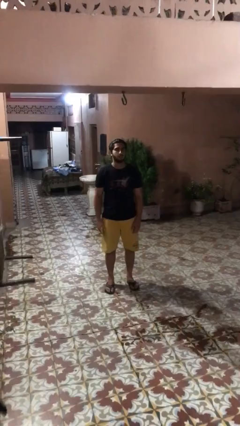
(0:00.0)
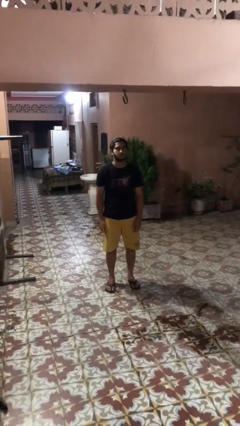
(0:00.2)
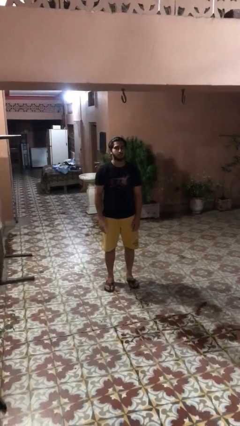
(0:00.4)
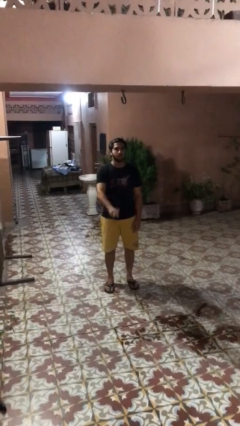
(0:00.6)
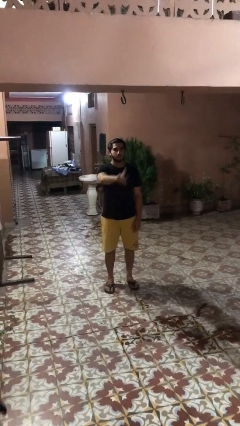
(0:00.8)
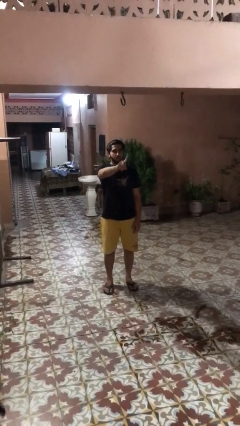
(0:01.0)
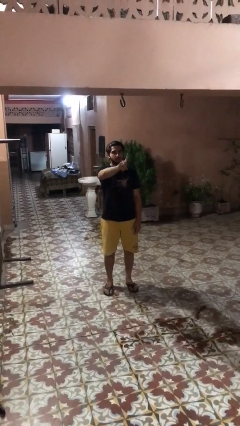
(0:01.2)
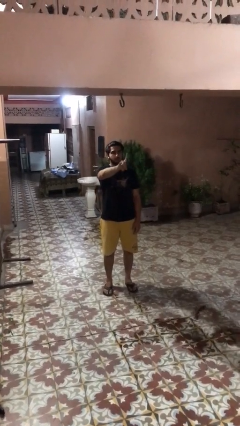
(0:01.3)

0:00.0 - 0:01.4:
person gestures number one

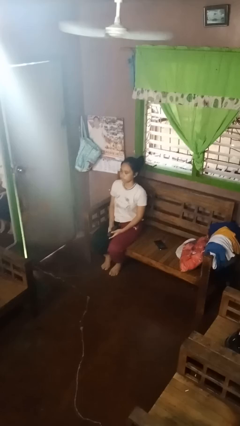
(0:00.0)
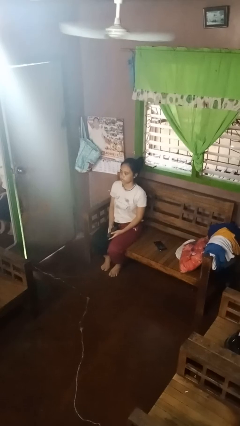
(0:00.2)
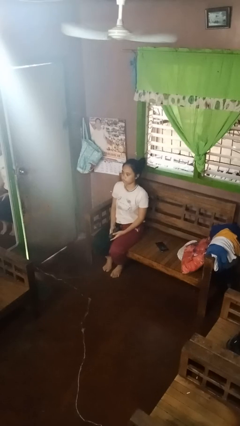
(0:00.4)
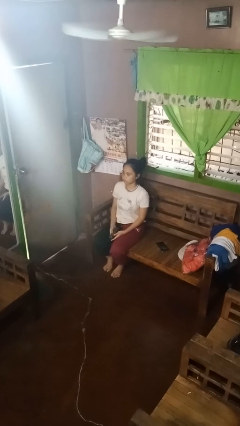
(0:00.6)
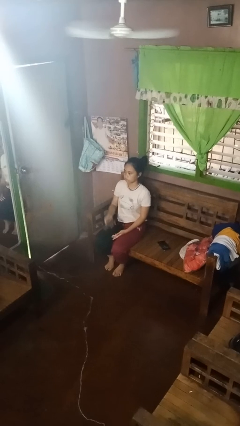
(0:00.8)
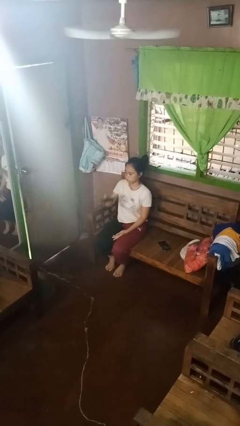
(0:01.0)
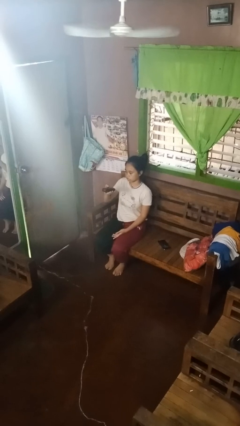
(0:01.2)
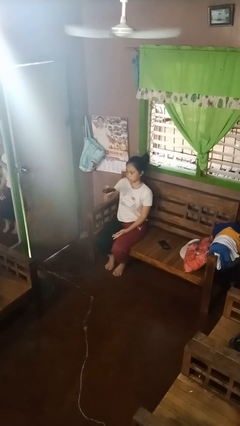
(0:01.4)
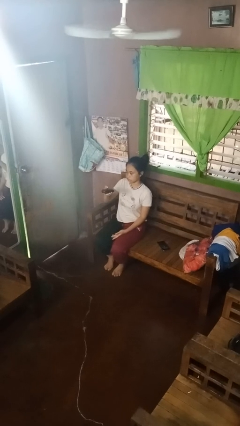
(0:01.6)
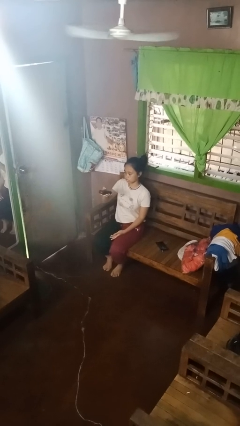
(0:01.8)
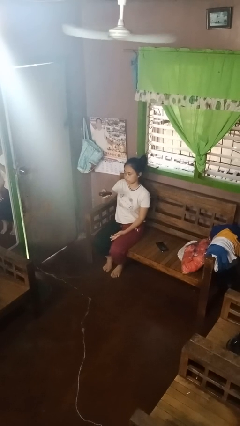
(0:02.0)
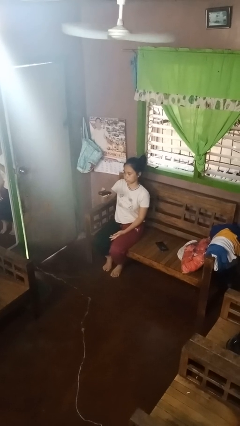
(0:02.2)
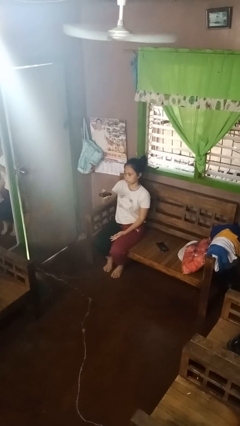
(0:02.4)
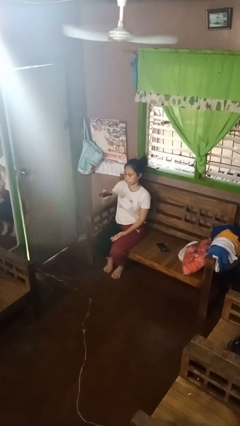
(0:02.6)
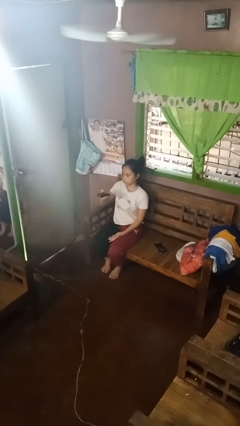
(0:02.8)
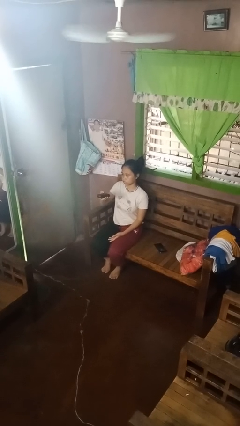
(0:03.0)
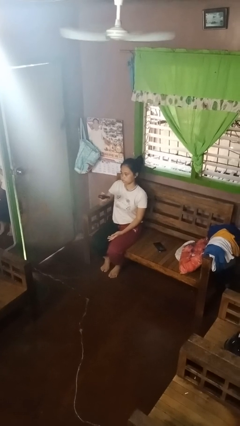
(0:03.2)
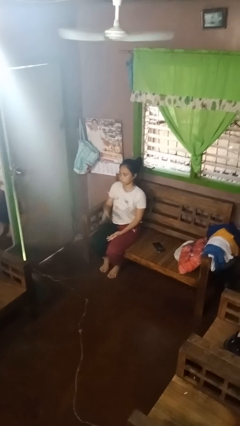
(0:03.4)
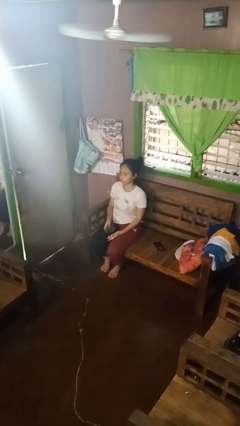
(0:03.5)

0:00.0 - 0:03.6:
person uses television remote

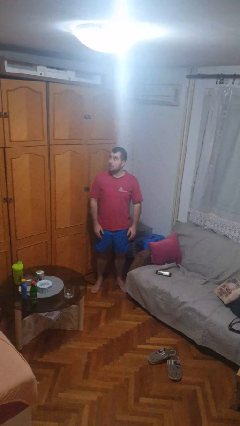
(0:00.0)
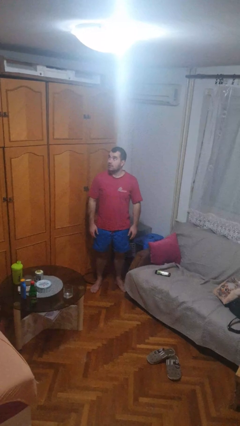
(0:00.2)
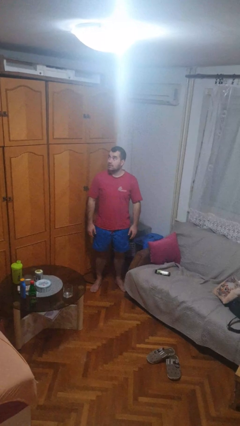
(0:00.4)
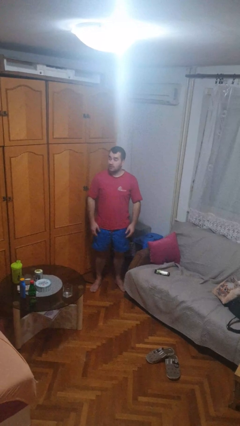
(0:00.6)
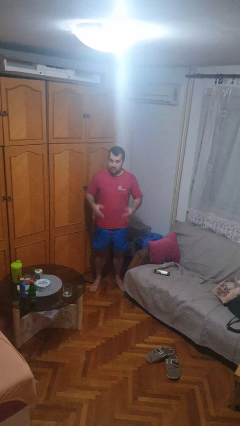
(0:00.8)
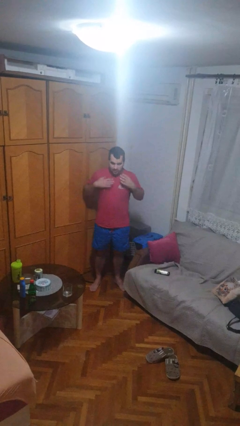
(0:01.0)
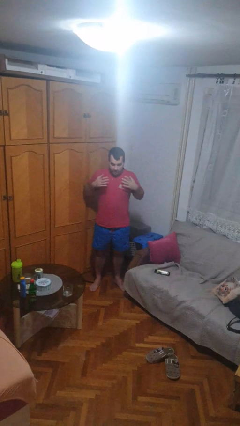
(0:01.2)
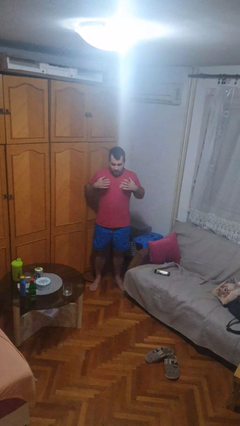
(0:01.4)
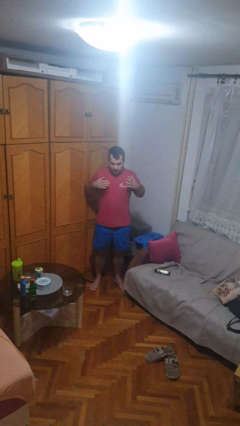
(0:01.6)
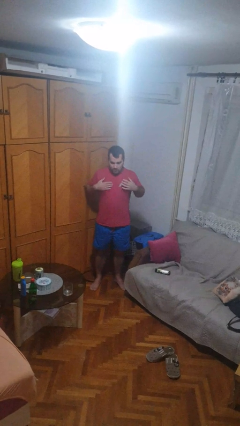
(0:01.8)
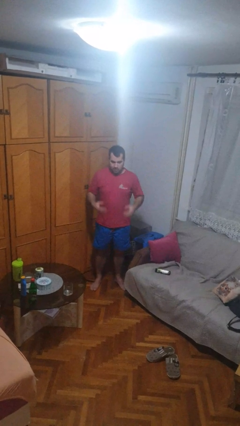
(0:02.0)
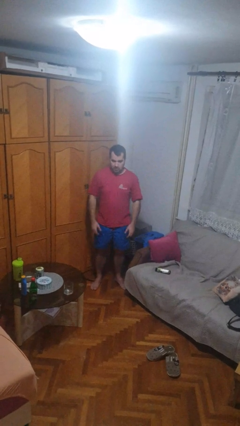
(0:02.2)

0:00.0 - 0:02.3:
person drums on chest

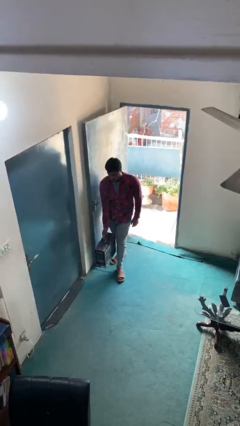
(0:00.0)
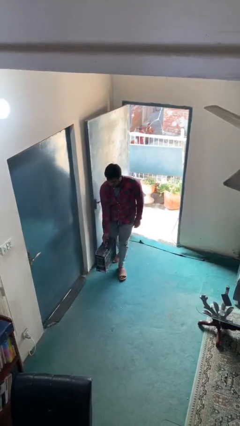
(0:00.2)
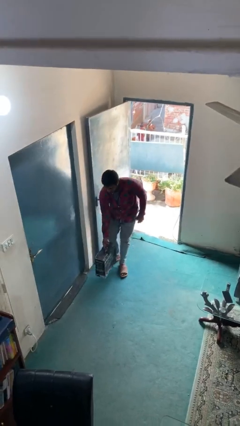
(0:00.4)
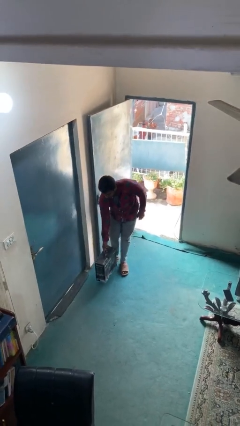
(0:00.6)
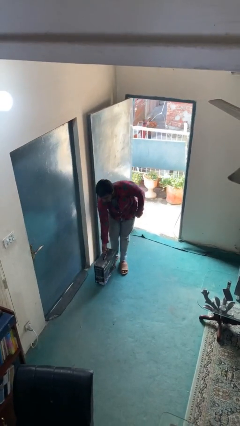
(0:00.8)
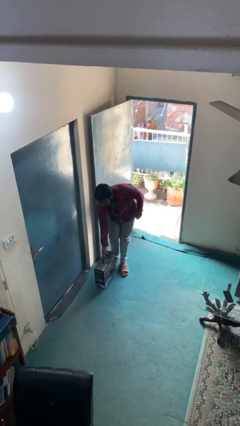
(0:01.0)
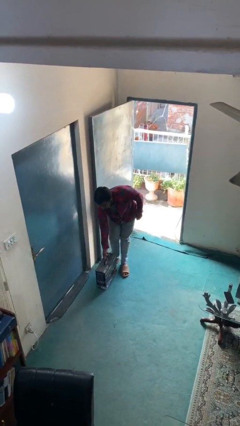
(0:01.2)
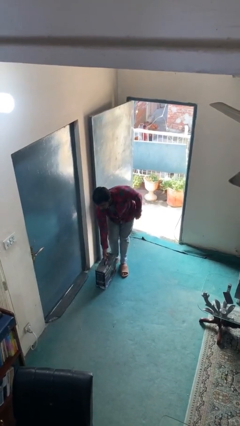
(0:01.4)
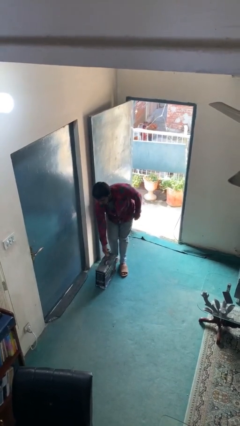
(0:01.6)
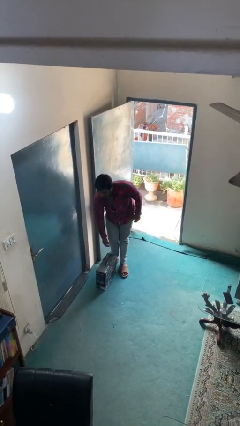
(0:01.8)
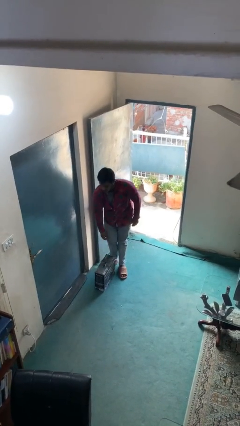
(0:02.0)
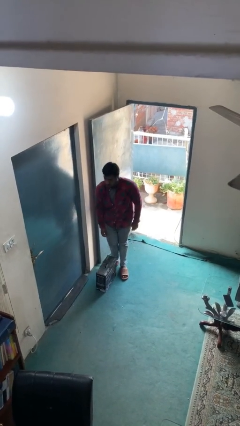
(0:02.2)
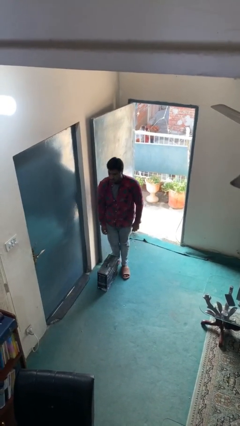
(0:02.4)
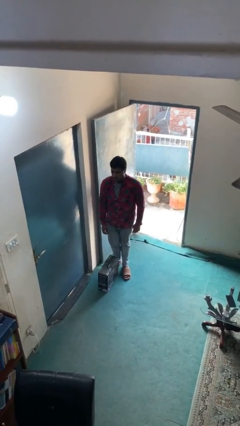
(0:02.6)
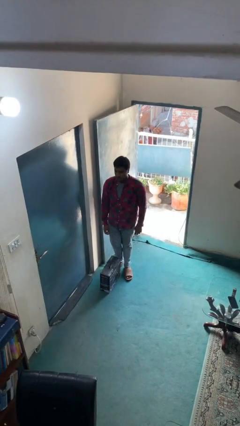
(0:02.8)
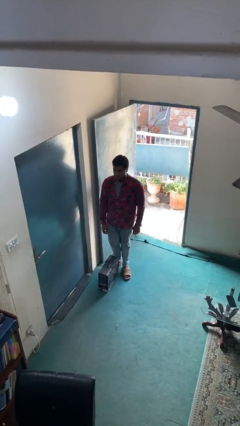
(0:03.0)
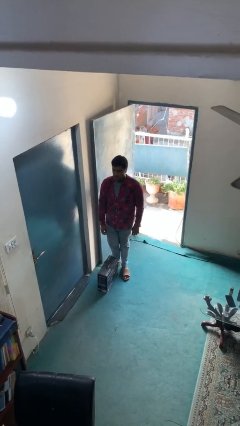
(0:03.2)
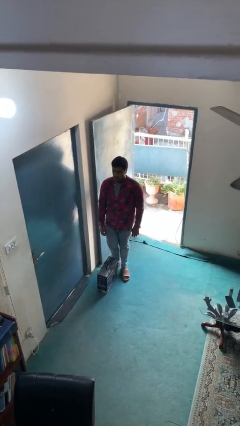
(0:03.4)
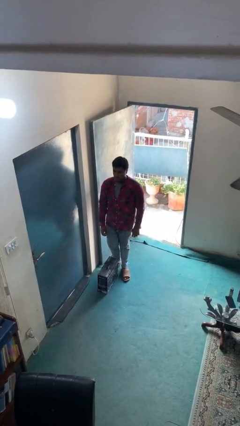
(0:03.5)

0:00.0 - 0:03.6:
person puts down object on floor

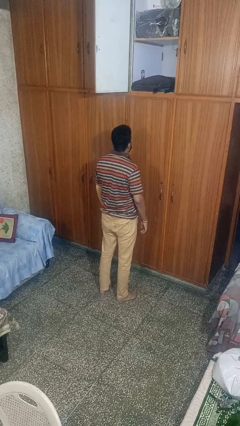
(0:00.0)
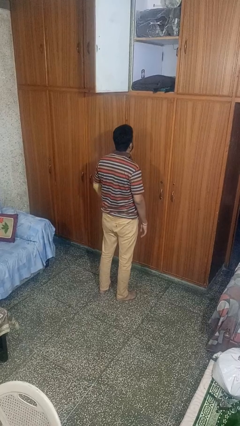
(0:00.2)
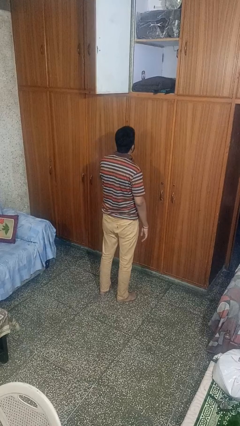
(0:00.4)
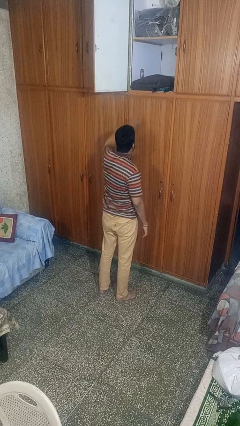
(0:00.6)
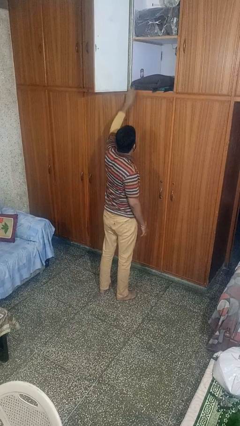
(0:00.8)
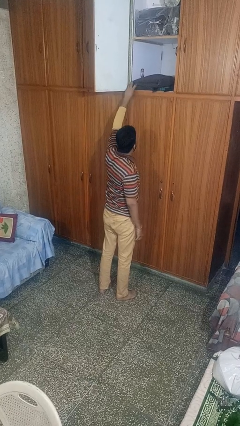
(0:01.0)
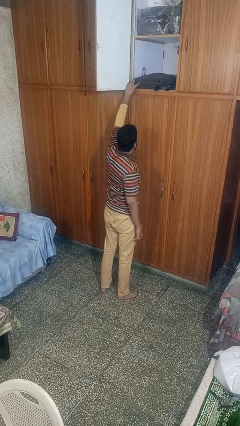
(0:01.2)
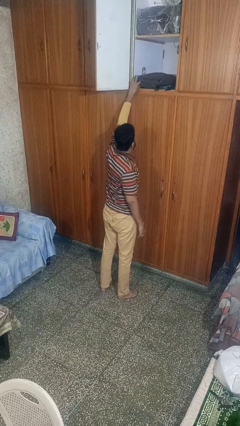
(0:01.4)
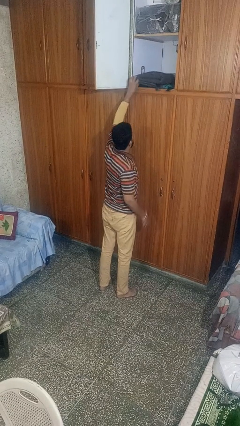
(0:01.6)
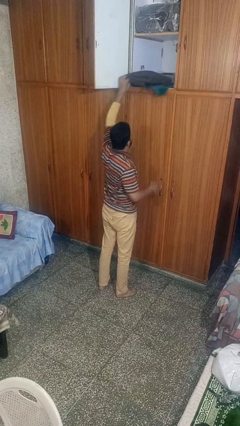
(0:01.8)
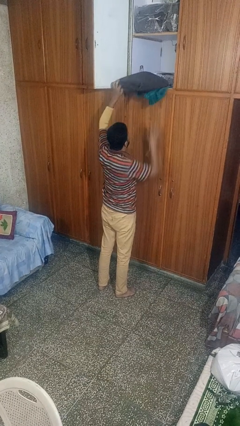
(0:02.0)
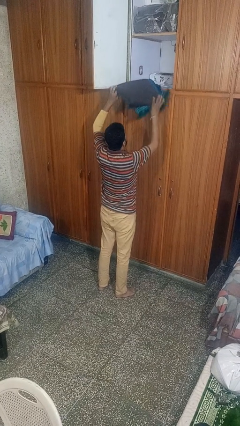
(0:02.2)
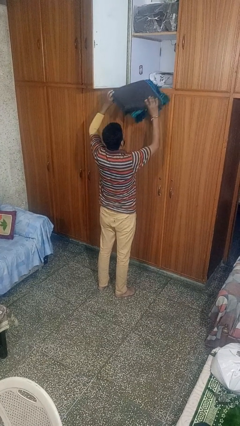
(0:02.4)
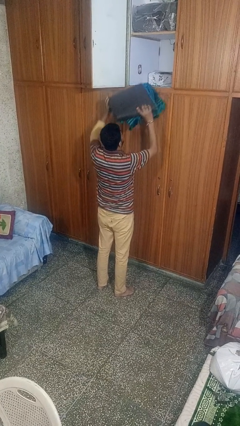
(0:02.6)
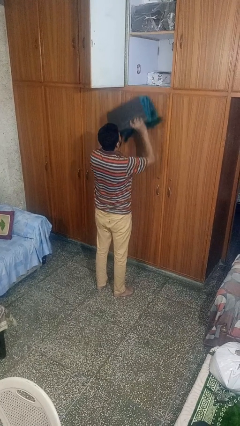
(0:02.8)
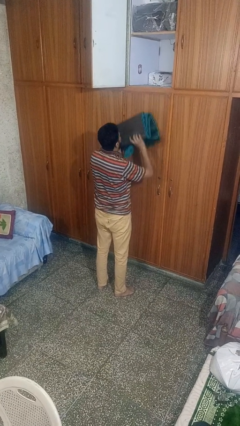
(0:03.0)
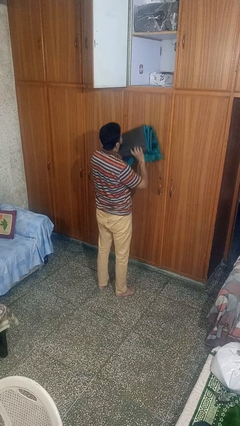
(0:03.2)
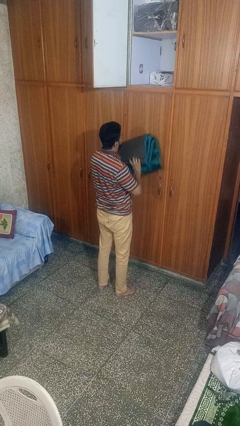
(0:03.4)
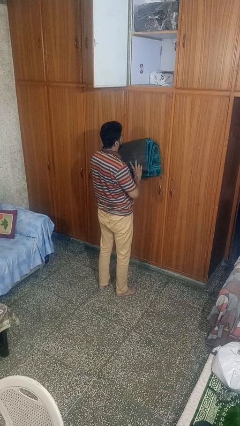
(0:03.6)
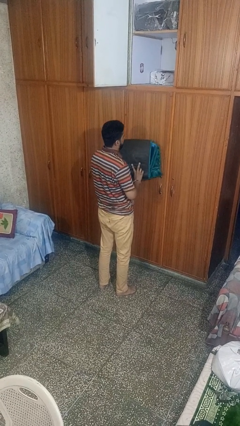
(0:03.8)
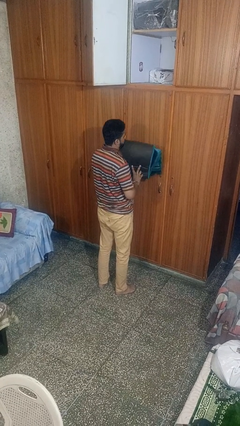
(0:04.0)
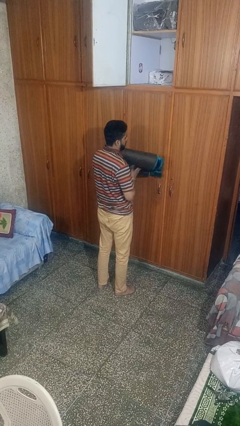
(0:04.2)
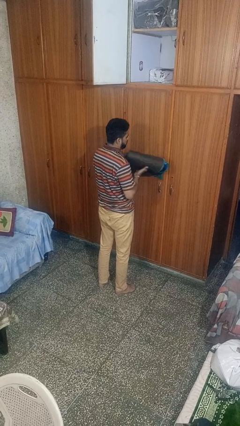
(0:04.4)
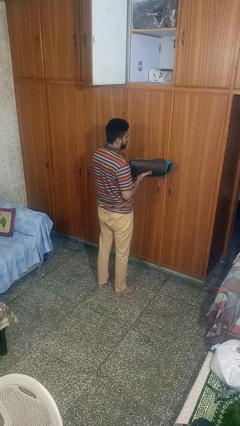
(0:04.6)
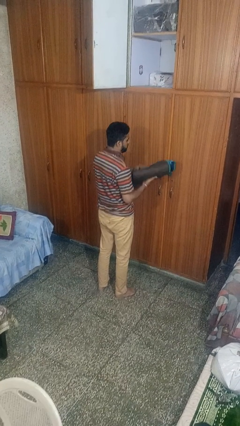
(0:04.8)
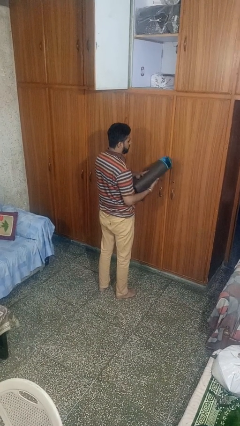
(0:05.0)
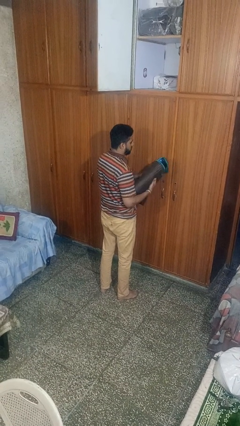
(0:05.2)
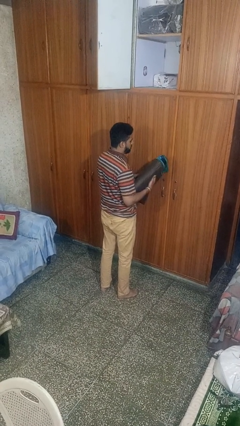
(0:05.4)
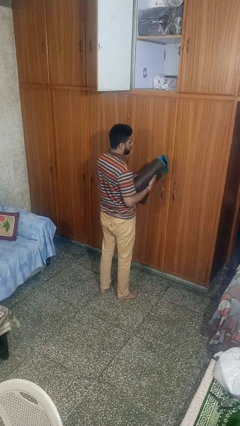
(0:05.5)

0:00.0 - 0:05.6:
person picks up object from shelf

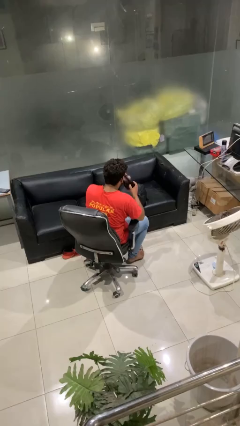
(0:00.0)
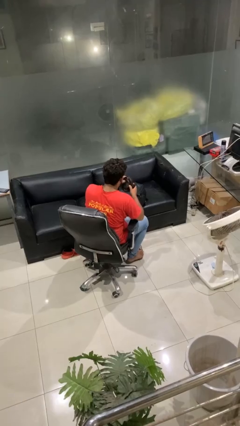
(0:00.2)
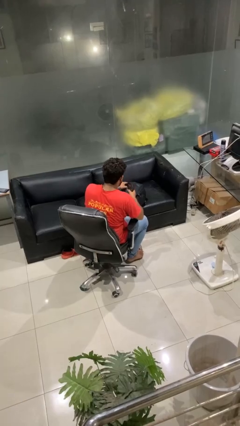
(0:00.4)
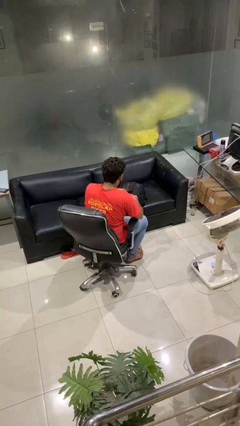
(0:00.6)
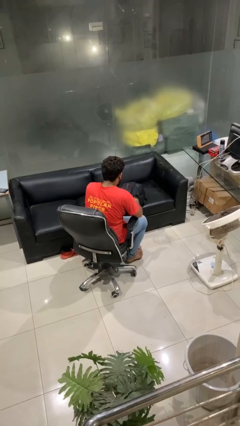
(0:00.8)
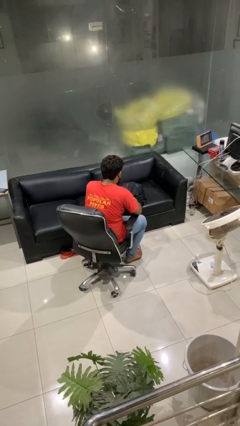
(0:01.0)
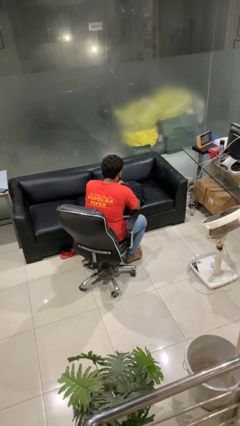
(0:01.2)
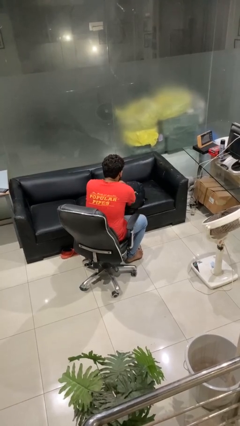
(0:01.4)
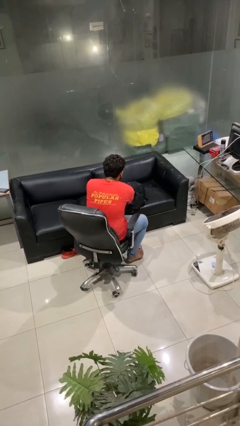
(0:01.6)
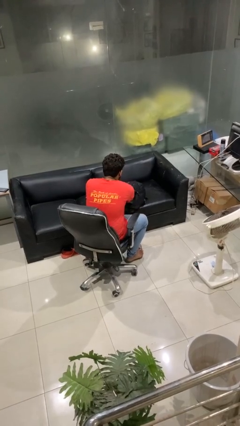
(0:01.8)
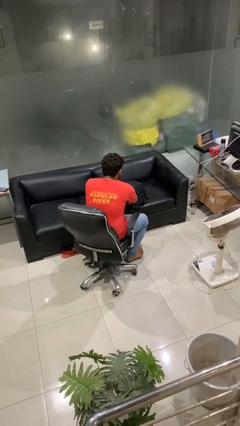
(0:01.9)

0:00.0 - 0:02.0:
person puts object into backpack
